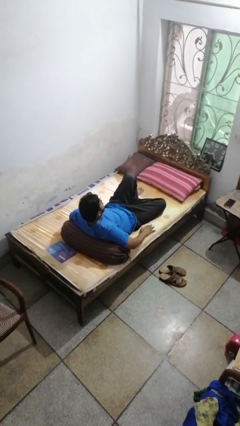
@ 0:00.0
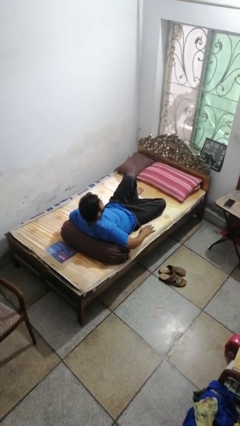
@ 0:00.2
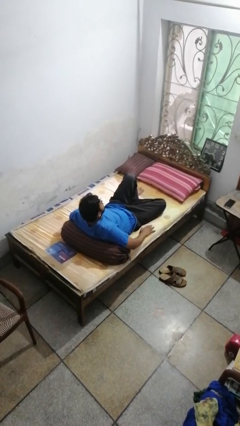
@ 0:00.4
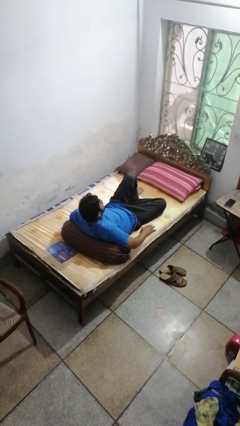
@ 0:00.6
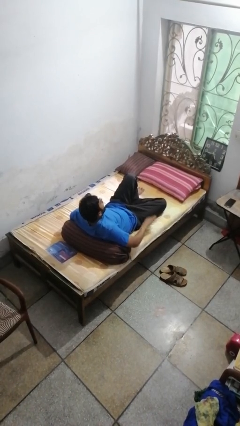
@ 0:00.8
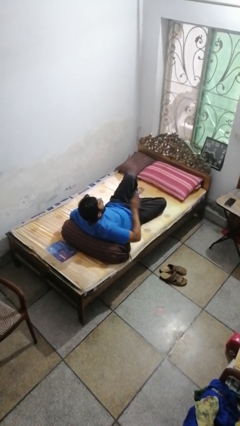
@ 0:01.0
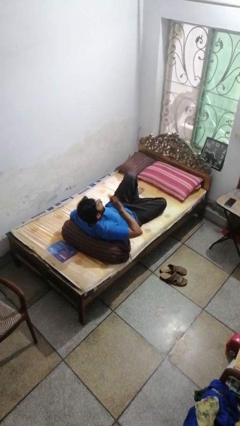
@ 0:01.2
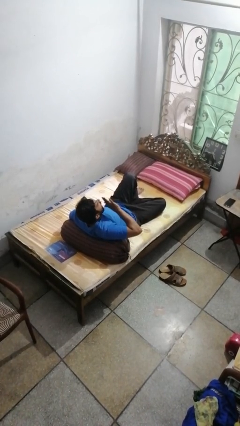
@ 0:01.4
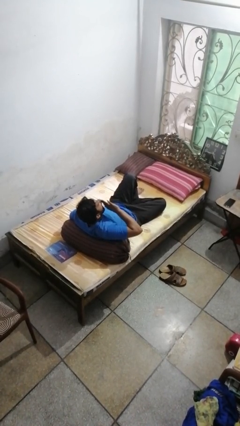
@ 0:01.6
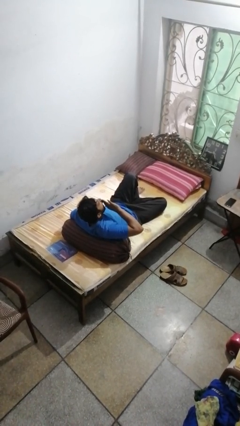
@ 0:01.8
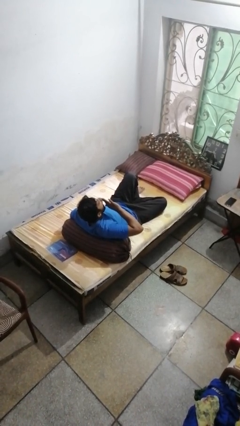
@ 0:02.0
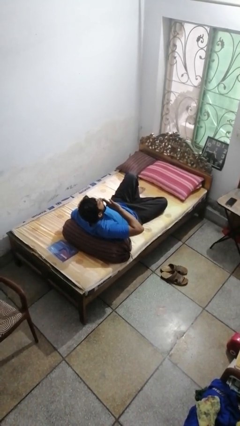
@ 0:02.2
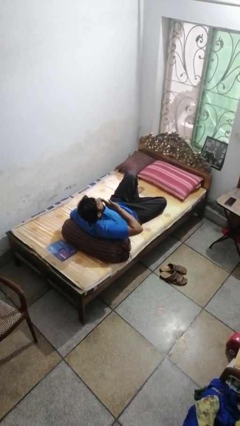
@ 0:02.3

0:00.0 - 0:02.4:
person yawns

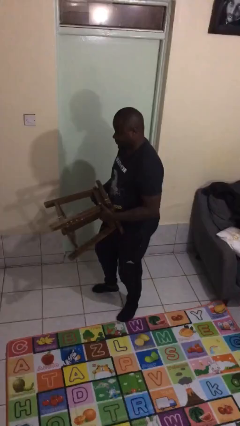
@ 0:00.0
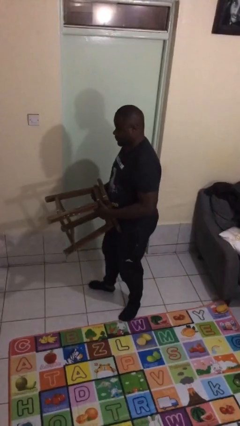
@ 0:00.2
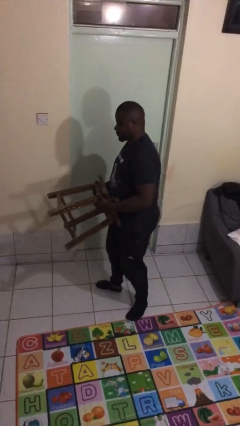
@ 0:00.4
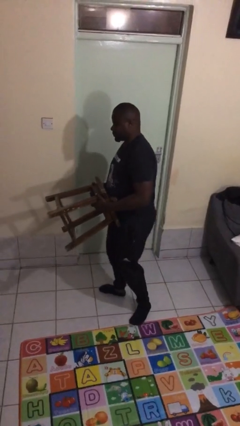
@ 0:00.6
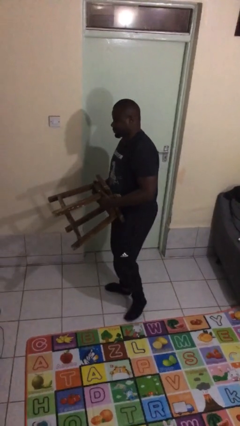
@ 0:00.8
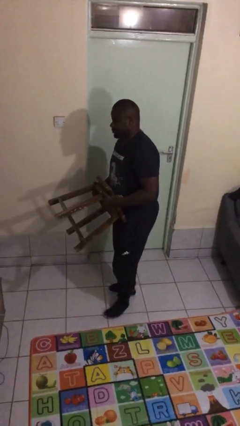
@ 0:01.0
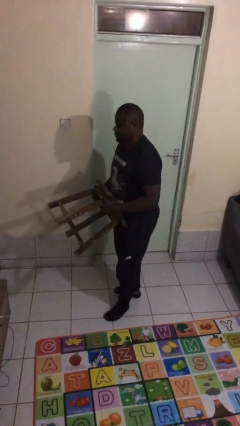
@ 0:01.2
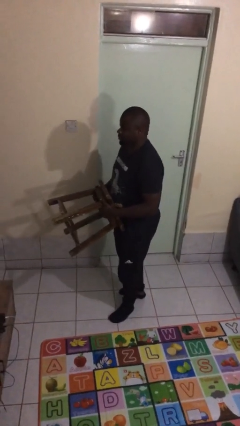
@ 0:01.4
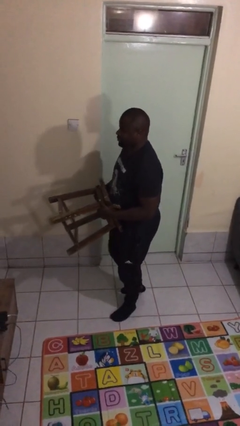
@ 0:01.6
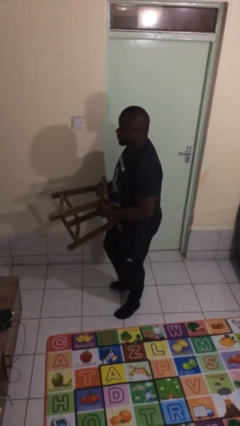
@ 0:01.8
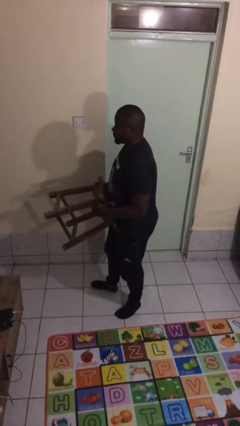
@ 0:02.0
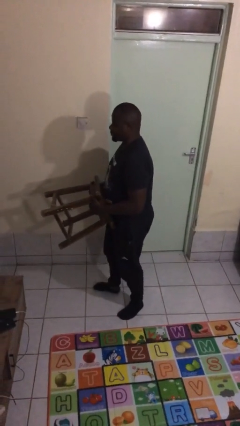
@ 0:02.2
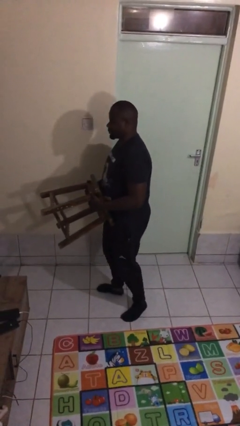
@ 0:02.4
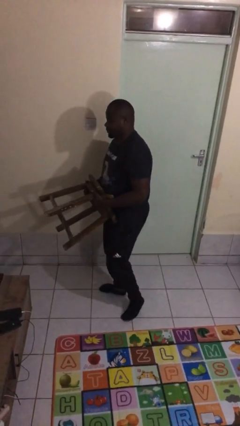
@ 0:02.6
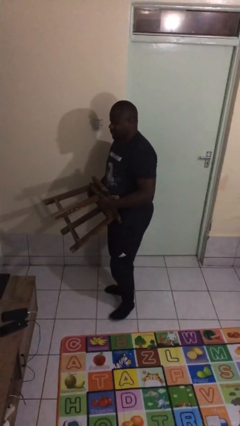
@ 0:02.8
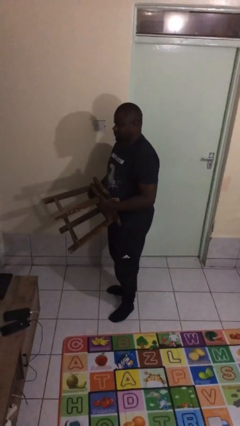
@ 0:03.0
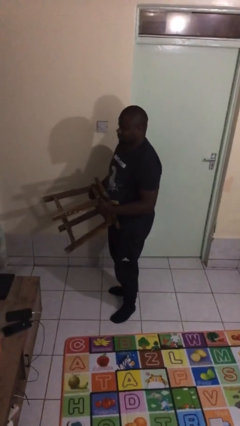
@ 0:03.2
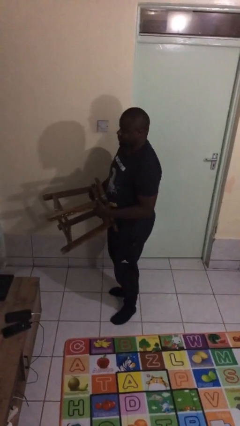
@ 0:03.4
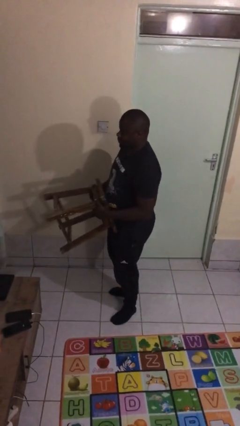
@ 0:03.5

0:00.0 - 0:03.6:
person carries furniture

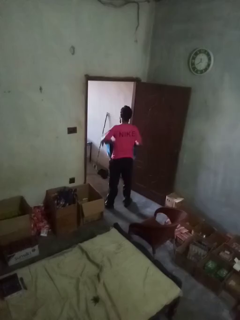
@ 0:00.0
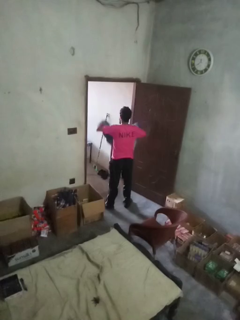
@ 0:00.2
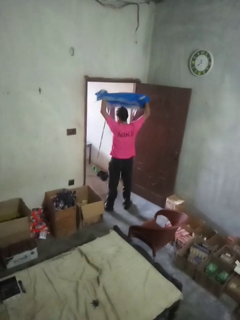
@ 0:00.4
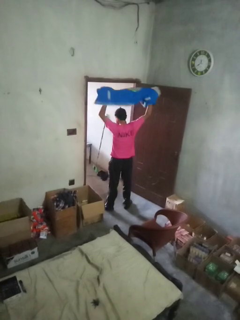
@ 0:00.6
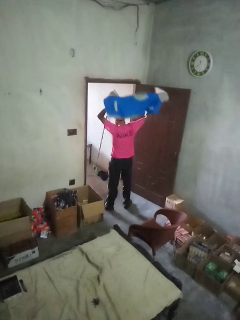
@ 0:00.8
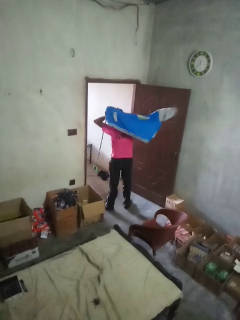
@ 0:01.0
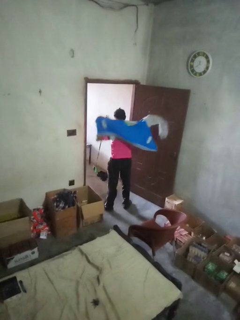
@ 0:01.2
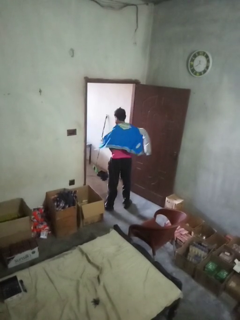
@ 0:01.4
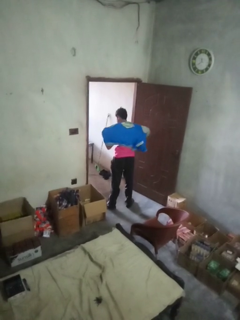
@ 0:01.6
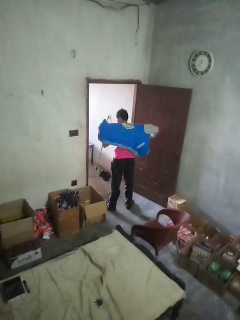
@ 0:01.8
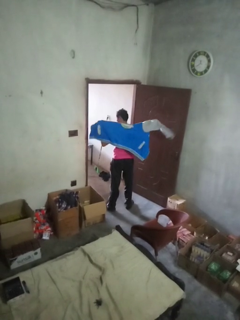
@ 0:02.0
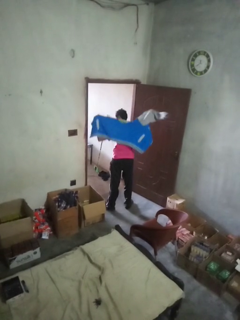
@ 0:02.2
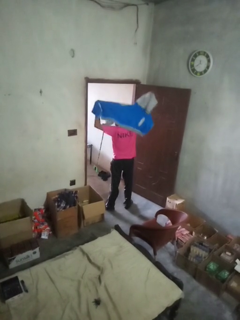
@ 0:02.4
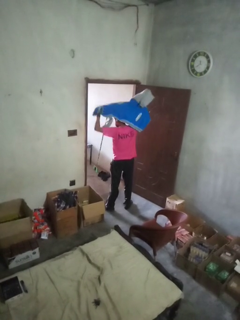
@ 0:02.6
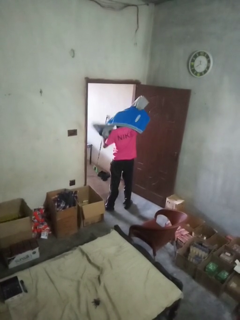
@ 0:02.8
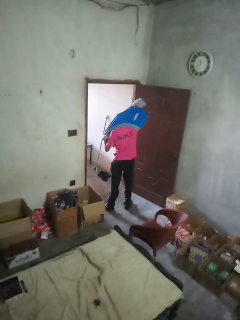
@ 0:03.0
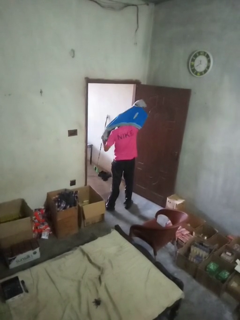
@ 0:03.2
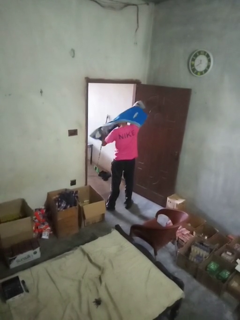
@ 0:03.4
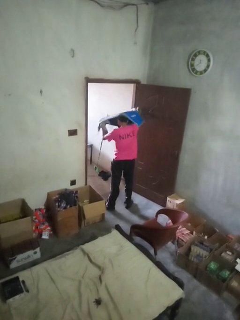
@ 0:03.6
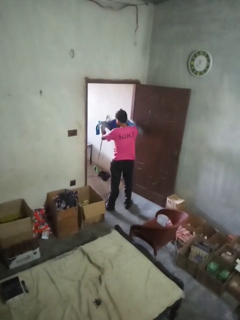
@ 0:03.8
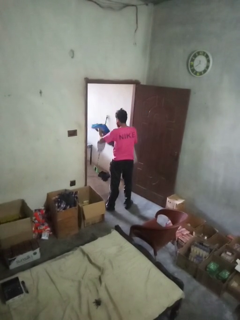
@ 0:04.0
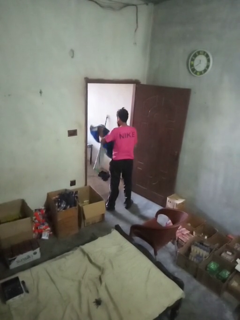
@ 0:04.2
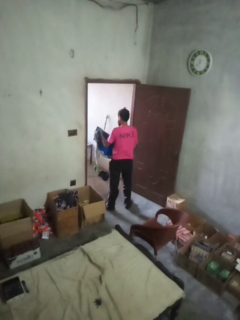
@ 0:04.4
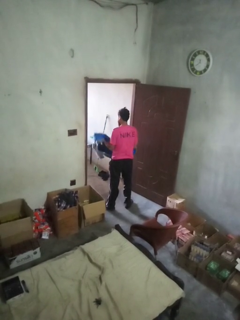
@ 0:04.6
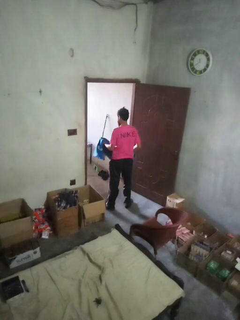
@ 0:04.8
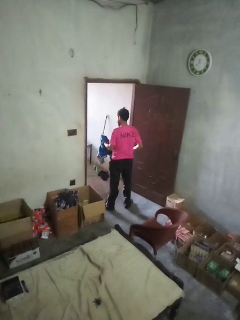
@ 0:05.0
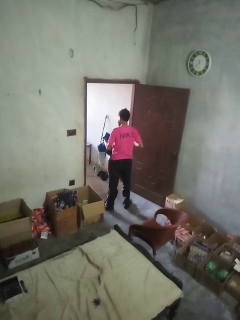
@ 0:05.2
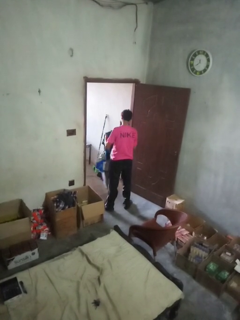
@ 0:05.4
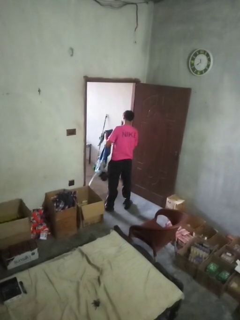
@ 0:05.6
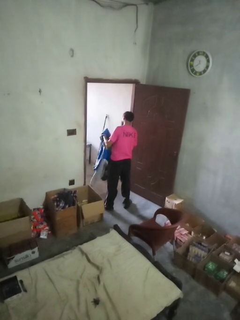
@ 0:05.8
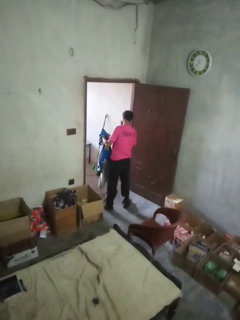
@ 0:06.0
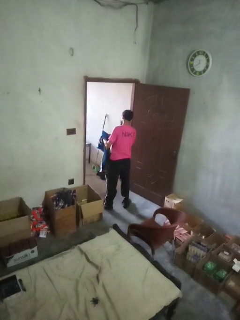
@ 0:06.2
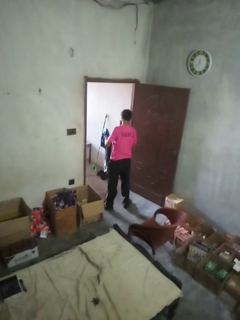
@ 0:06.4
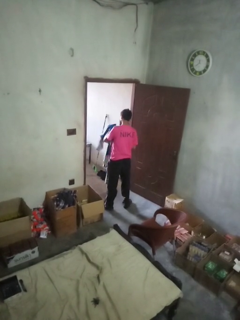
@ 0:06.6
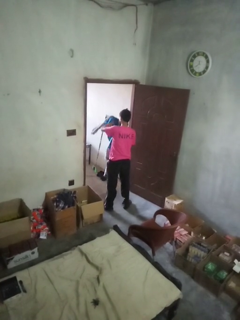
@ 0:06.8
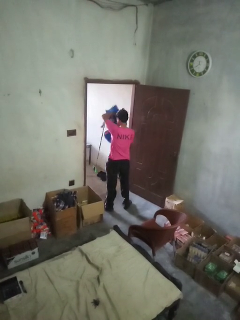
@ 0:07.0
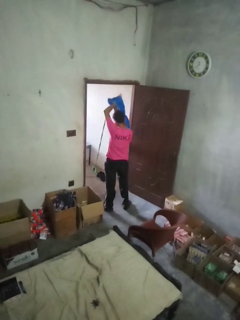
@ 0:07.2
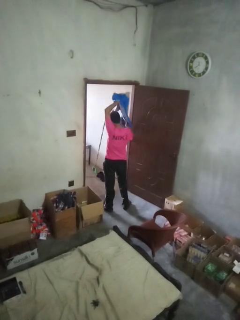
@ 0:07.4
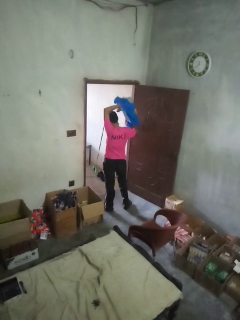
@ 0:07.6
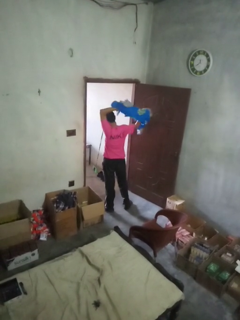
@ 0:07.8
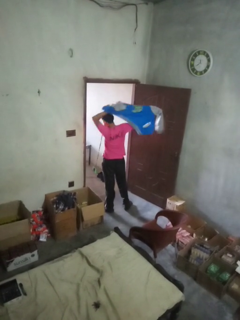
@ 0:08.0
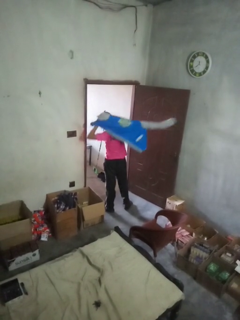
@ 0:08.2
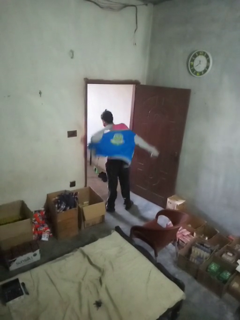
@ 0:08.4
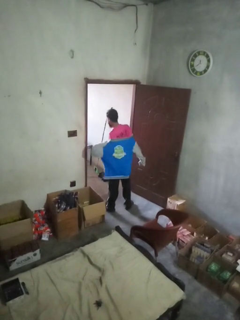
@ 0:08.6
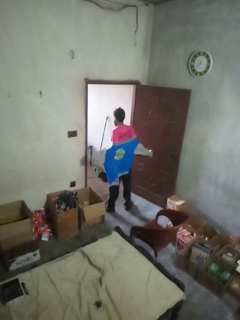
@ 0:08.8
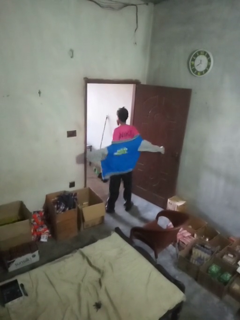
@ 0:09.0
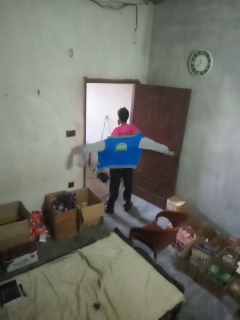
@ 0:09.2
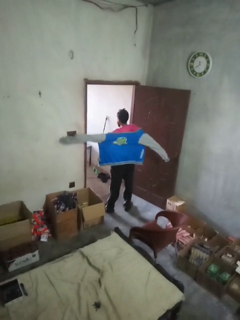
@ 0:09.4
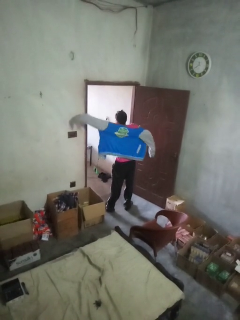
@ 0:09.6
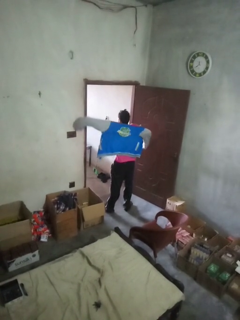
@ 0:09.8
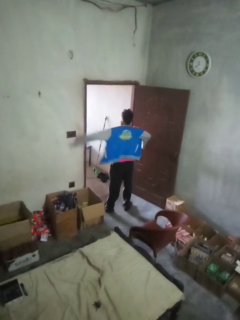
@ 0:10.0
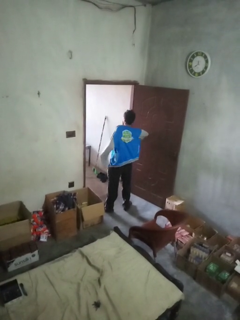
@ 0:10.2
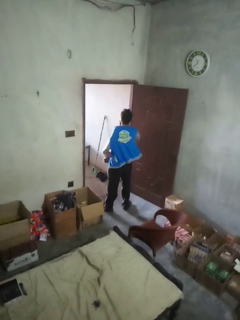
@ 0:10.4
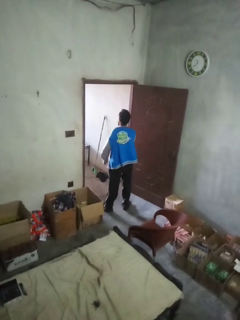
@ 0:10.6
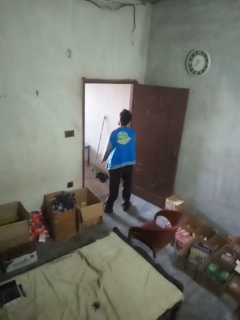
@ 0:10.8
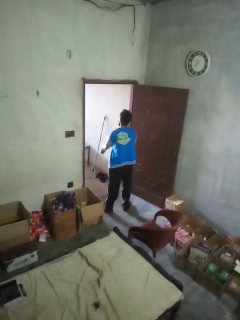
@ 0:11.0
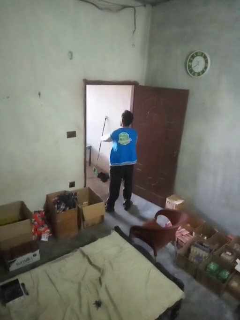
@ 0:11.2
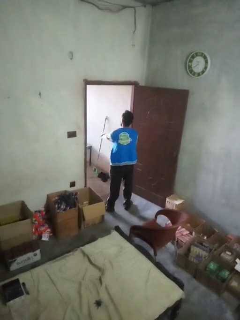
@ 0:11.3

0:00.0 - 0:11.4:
person puts on jacket

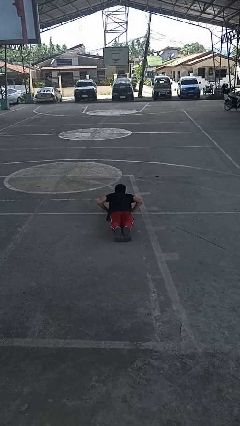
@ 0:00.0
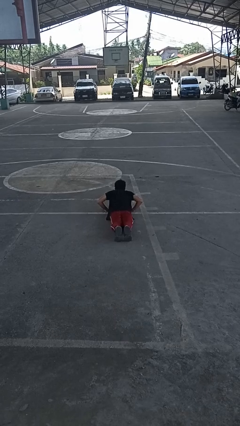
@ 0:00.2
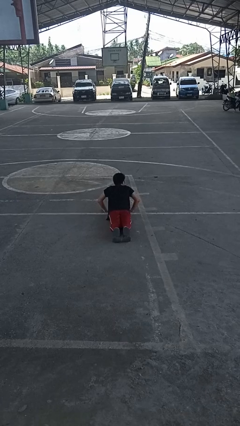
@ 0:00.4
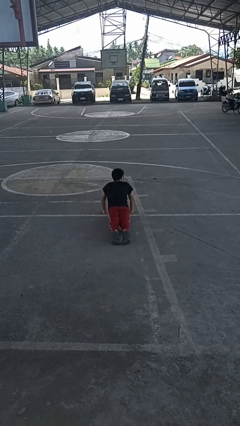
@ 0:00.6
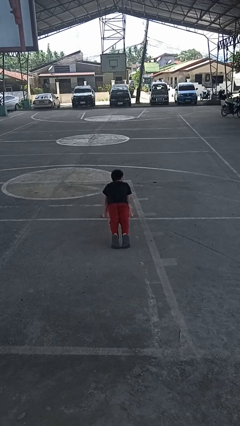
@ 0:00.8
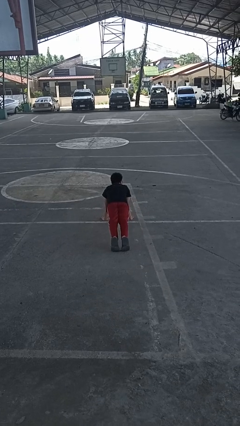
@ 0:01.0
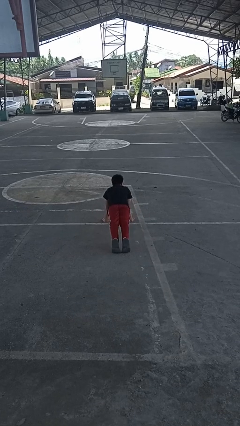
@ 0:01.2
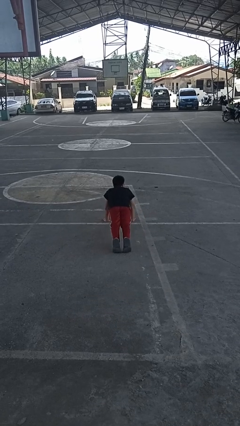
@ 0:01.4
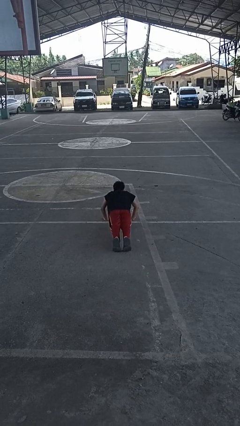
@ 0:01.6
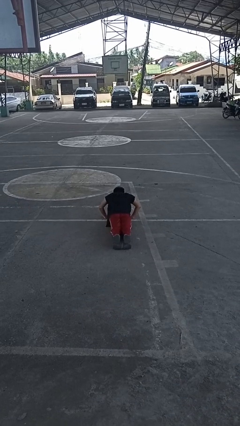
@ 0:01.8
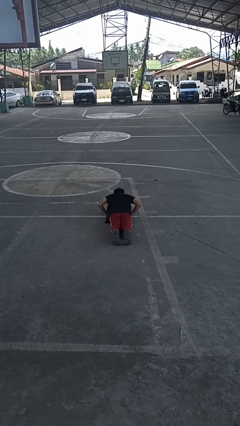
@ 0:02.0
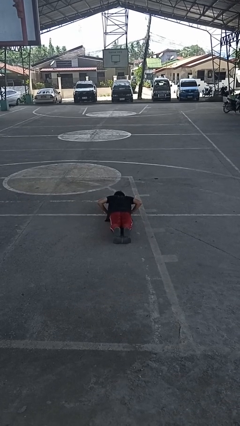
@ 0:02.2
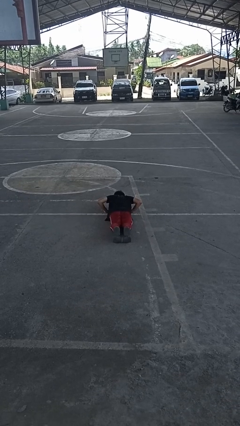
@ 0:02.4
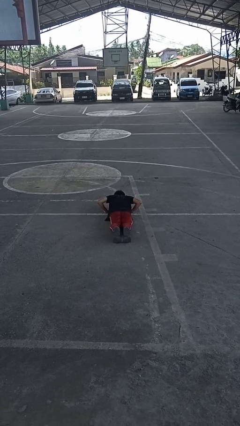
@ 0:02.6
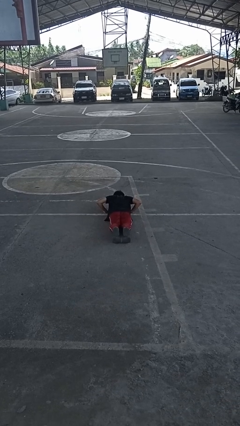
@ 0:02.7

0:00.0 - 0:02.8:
person exercises with pushup

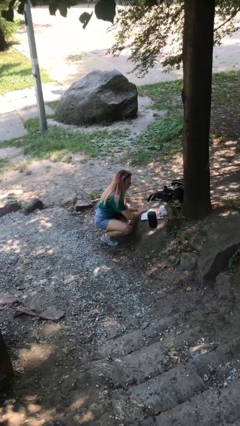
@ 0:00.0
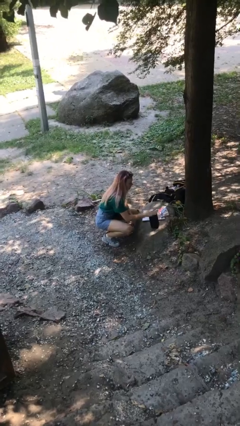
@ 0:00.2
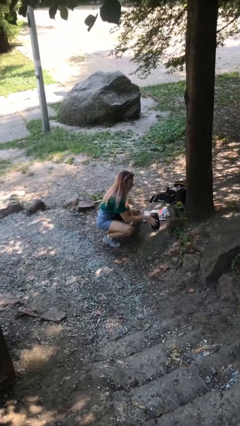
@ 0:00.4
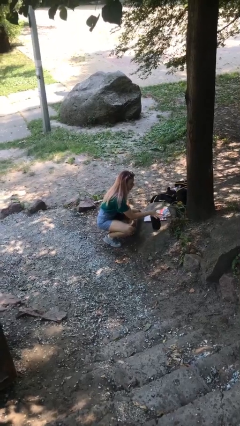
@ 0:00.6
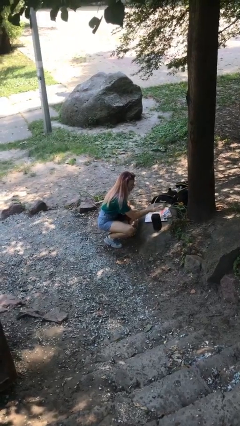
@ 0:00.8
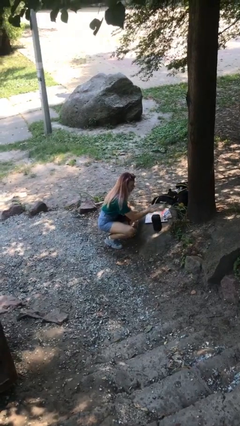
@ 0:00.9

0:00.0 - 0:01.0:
person waves hand over object
